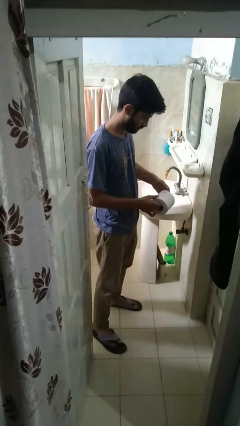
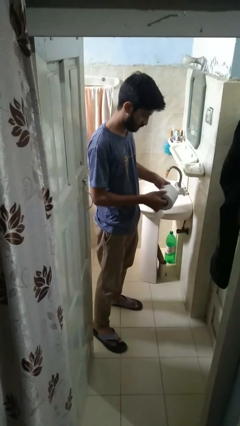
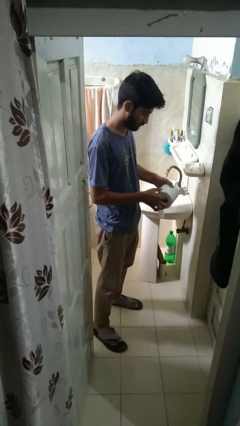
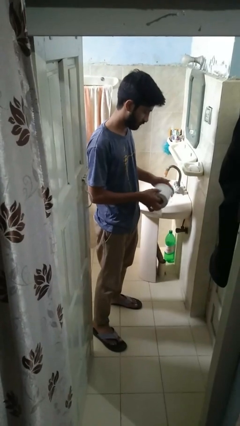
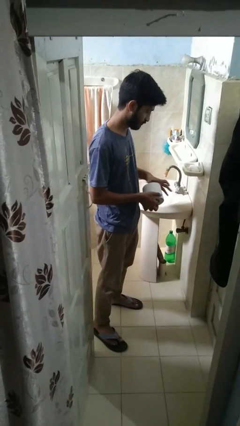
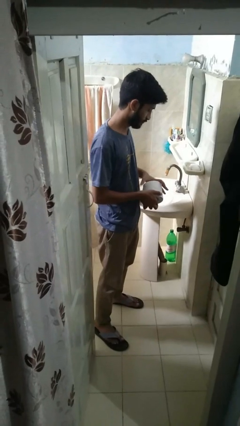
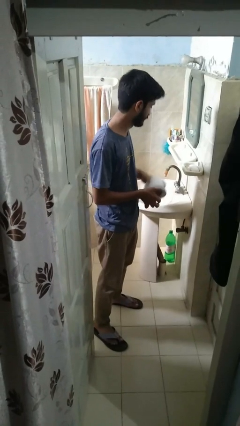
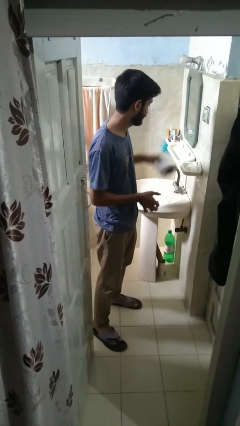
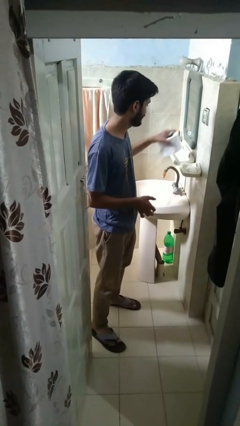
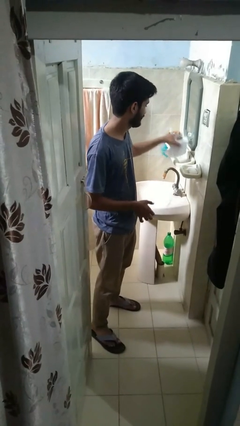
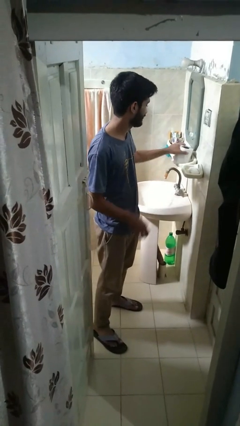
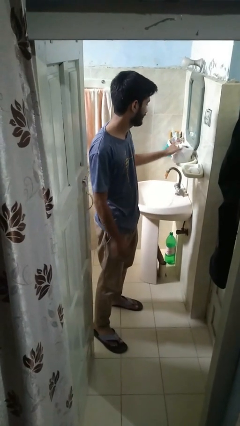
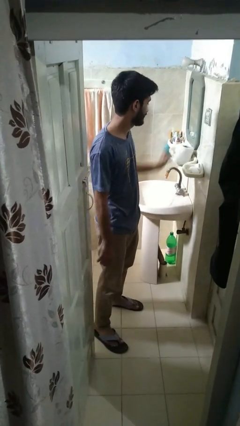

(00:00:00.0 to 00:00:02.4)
person puts down object on countertop

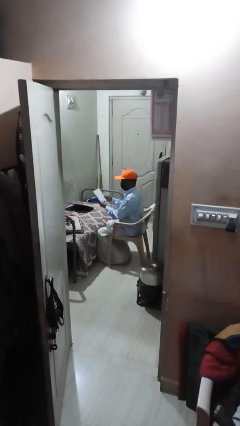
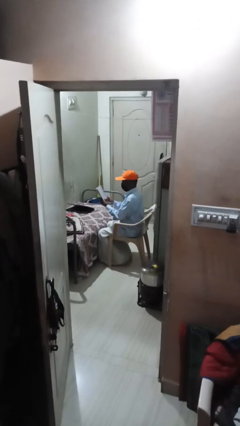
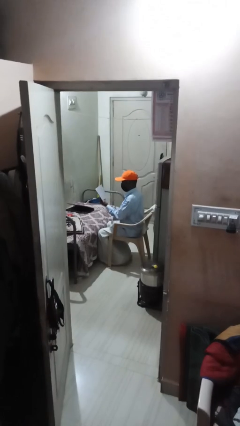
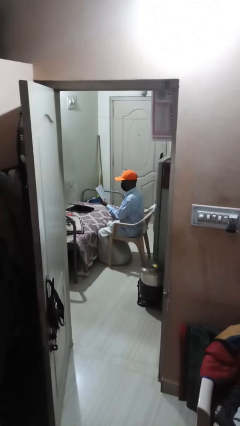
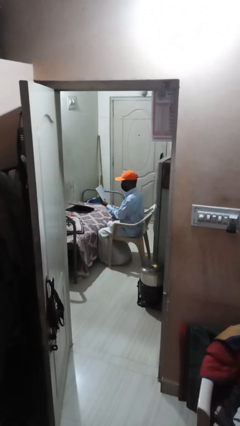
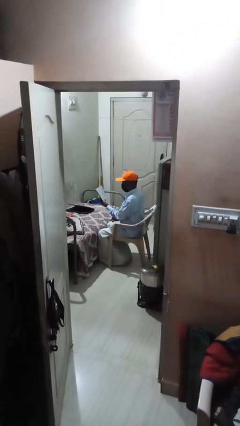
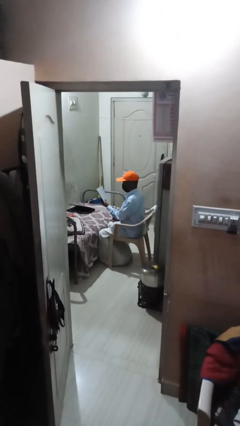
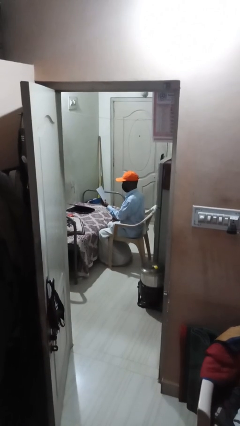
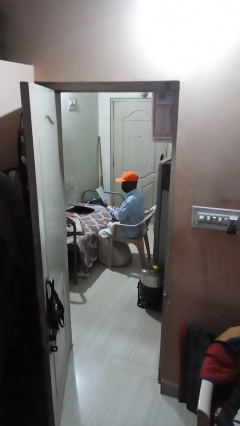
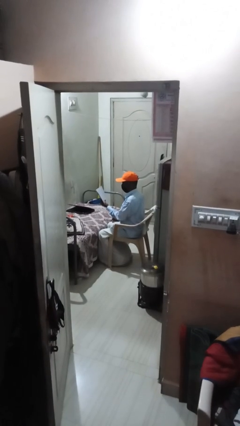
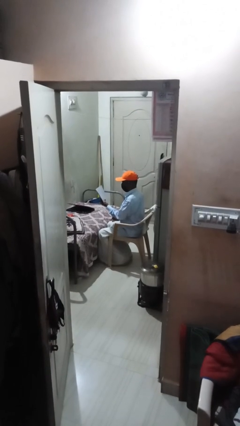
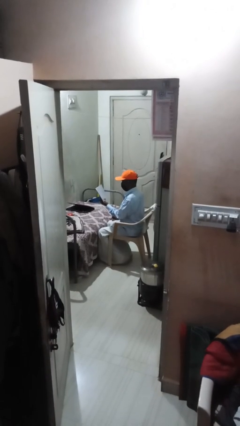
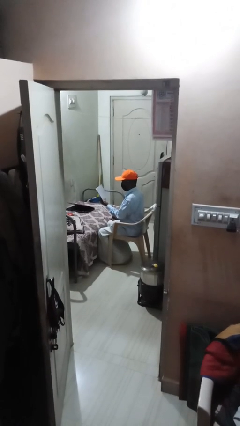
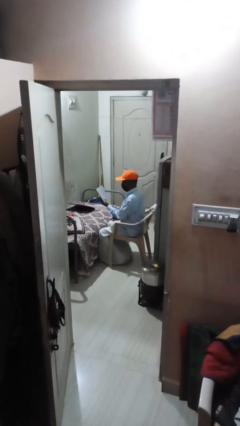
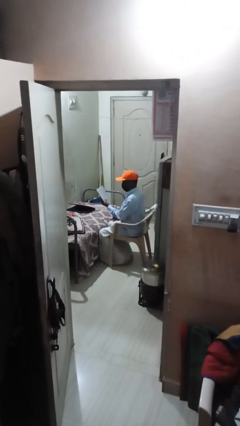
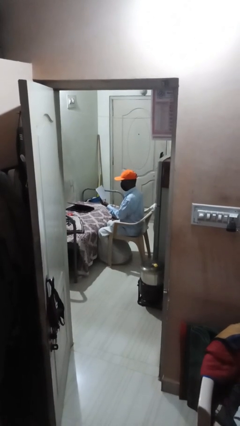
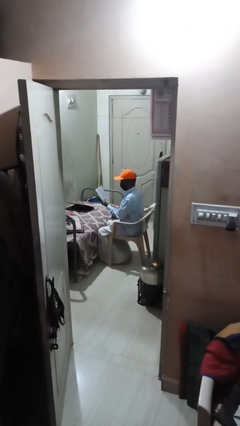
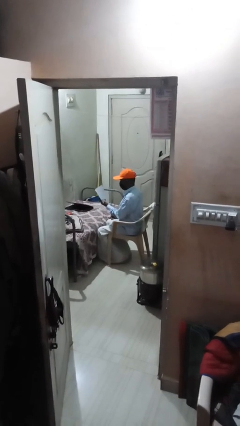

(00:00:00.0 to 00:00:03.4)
person reads document

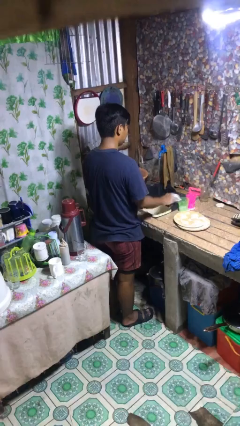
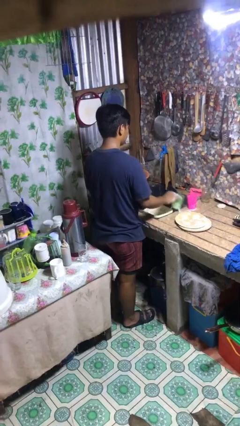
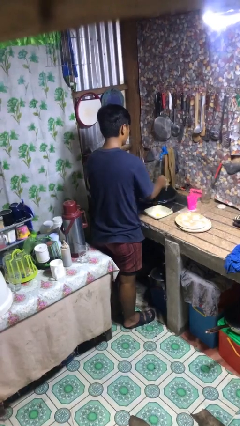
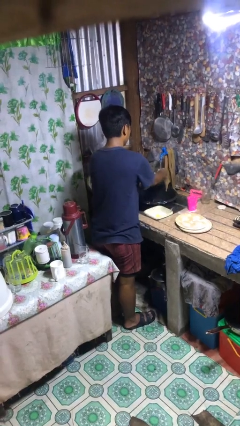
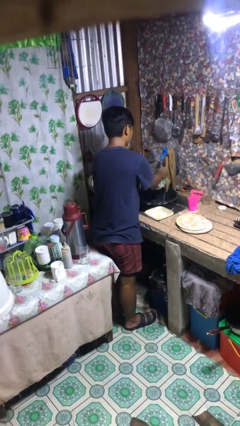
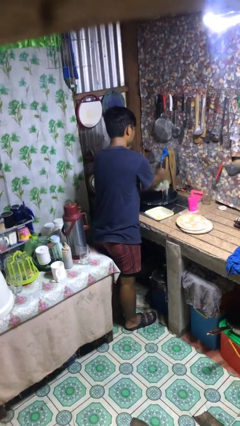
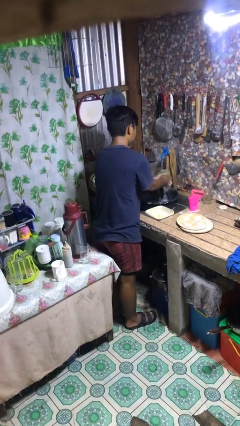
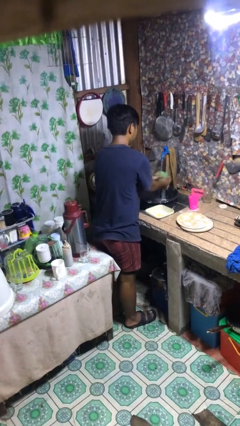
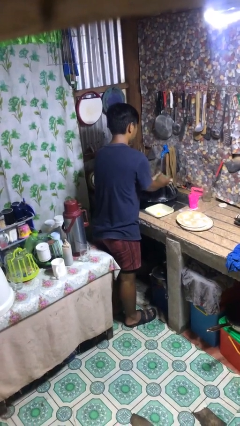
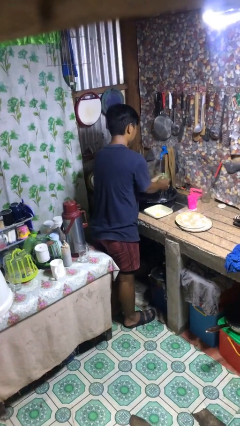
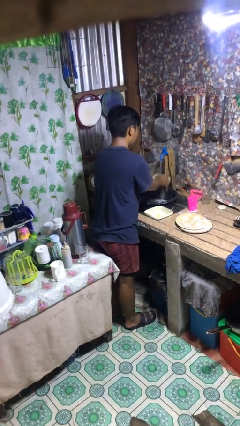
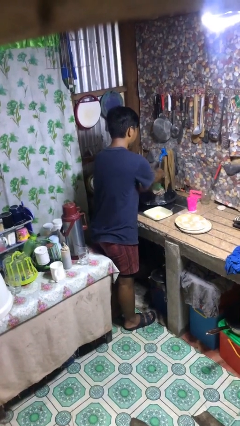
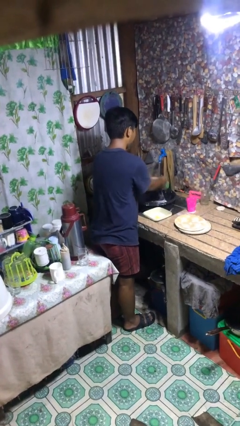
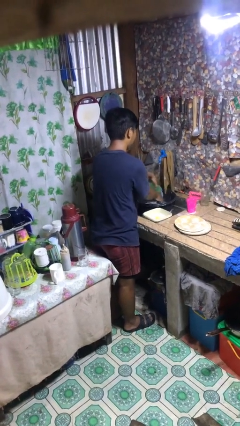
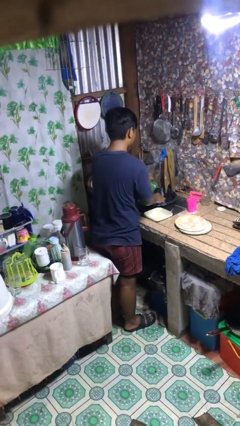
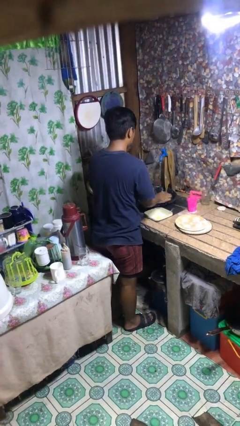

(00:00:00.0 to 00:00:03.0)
person washes dish

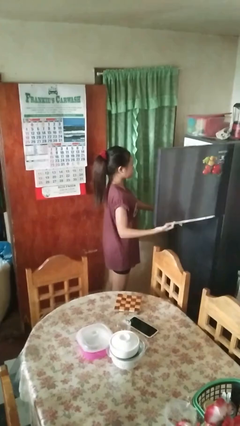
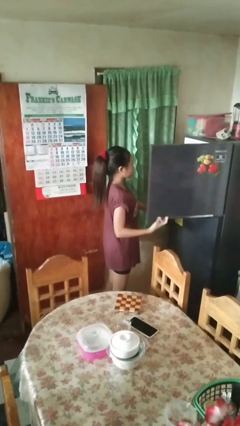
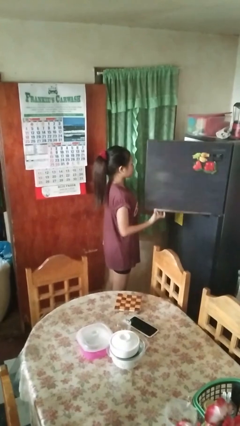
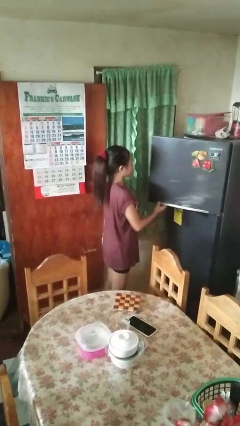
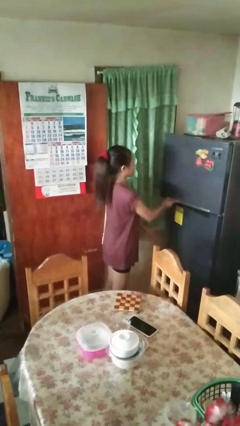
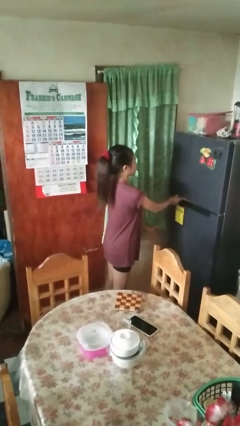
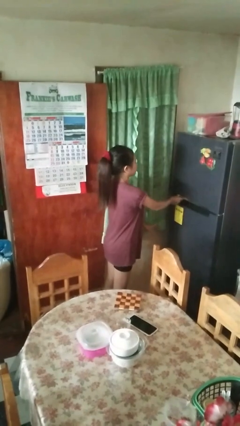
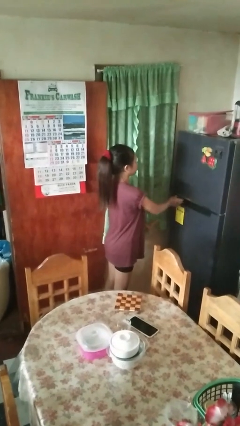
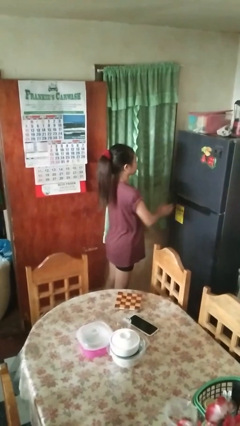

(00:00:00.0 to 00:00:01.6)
person closes refrigerator

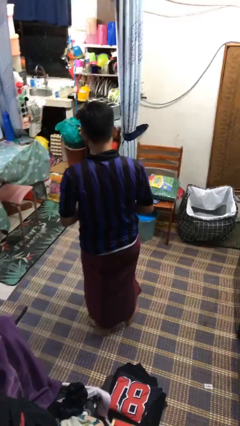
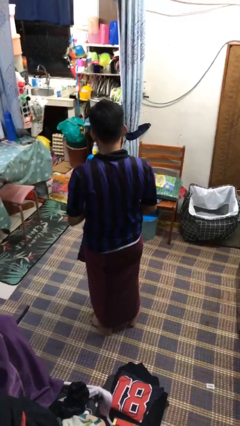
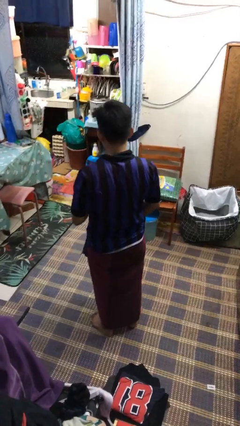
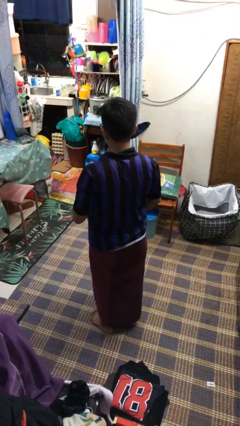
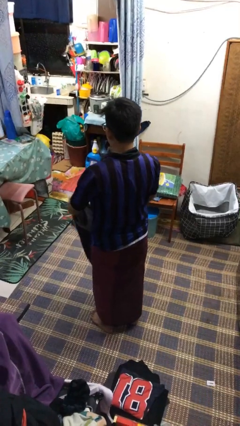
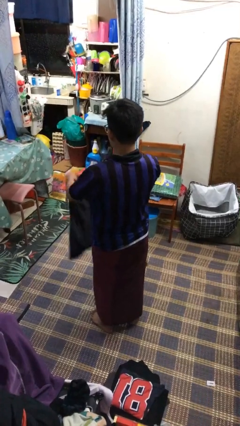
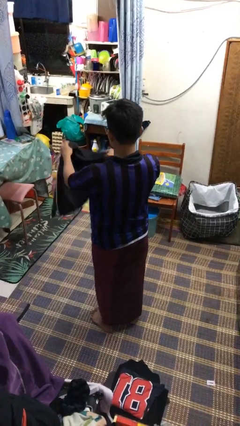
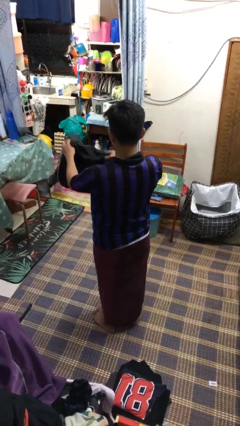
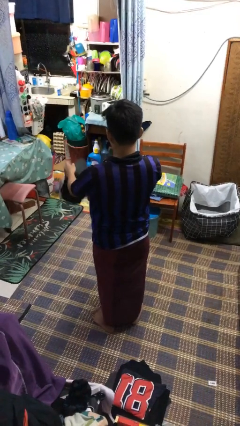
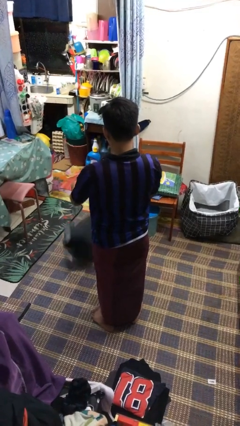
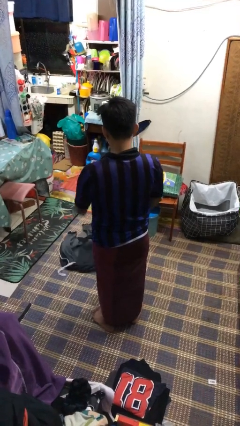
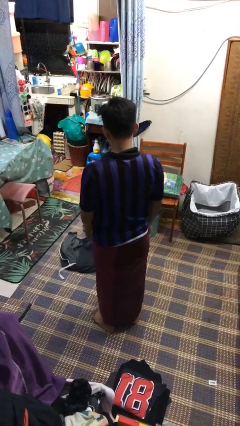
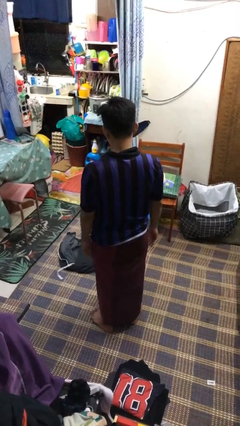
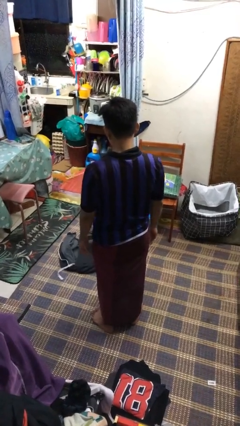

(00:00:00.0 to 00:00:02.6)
person throws object to ground

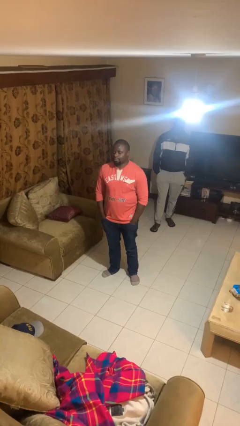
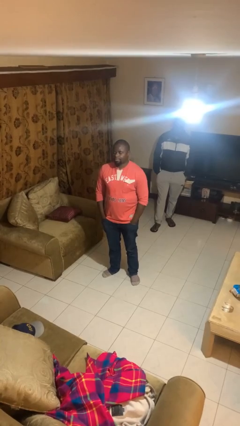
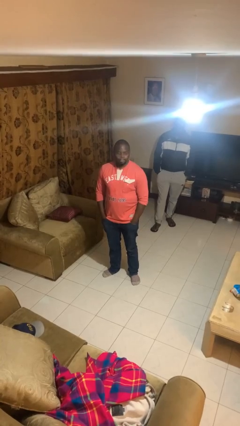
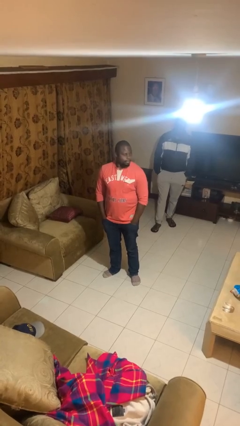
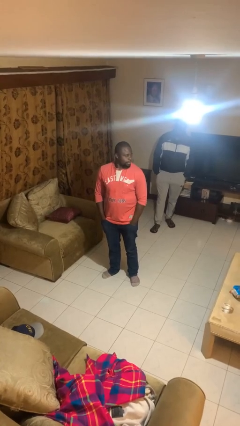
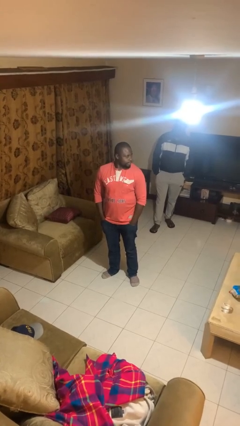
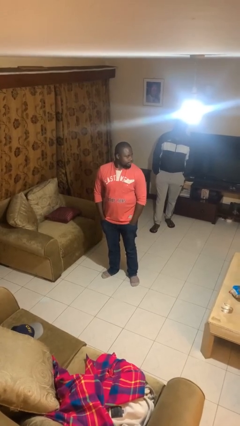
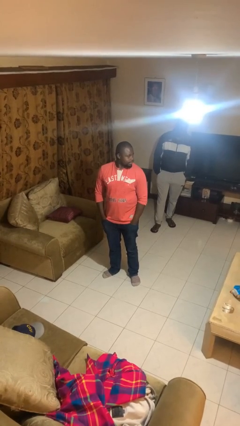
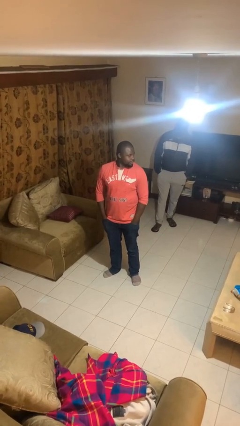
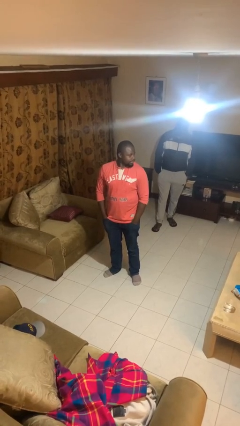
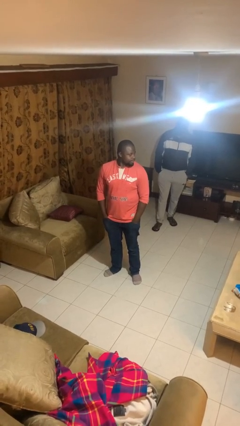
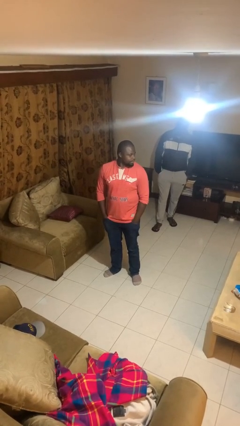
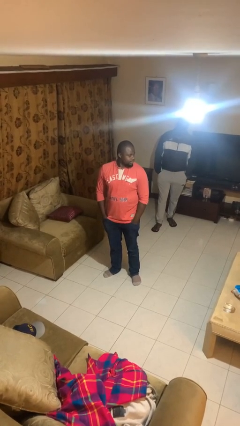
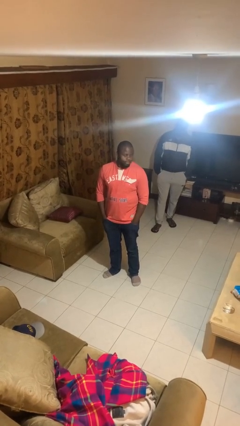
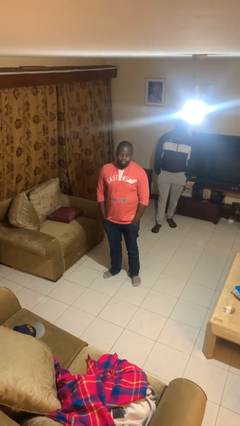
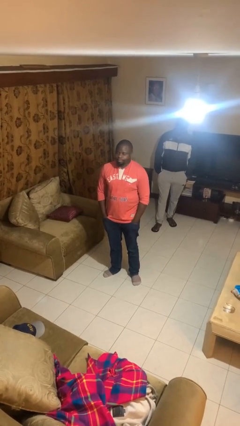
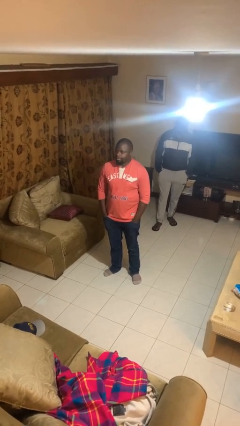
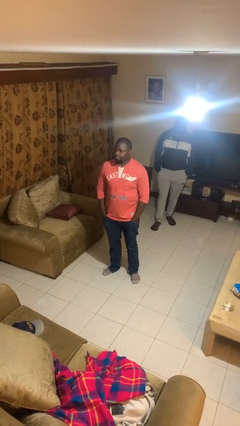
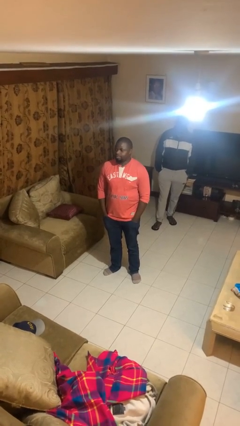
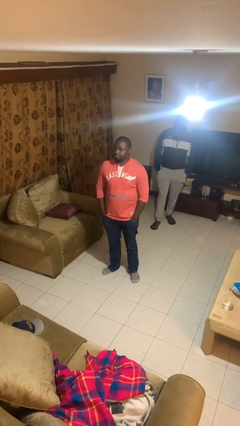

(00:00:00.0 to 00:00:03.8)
person looks over shoulder

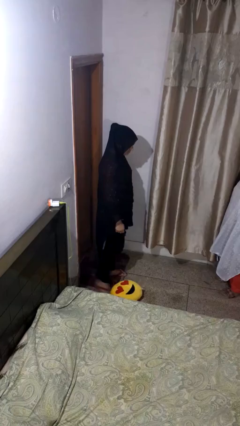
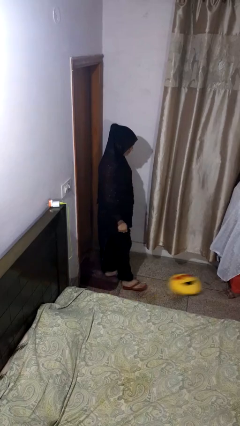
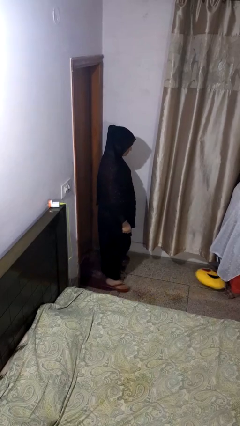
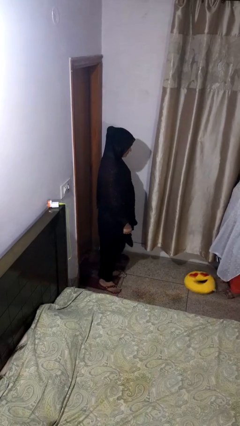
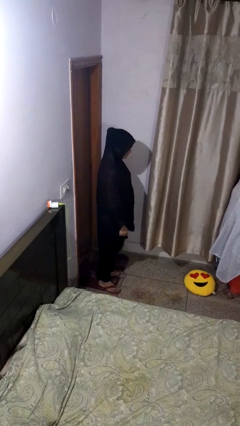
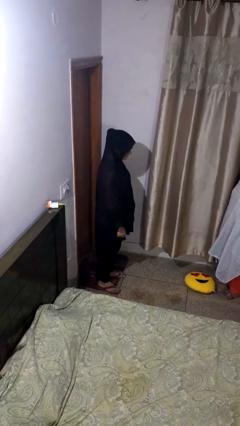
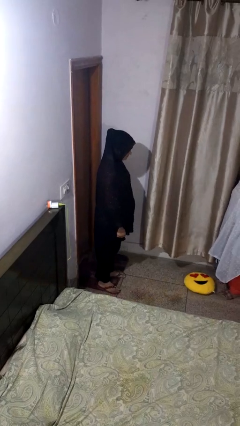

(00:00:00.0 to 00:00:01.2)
person kicks object to person
